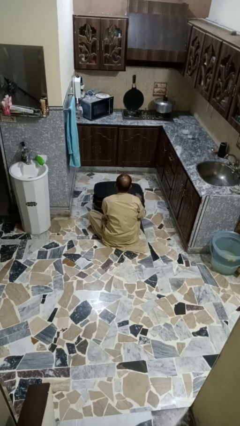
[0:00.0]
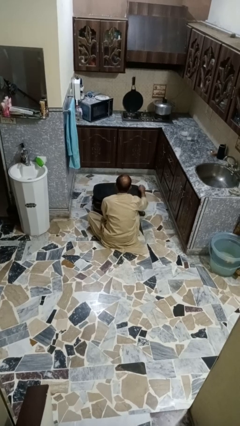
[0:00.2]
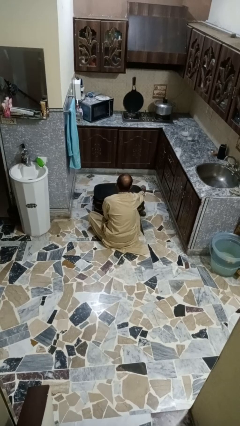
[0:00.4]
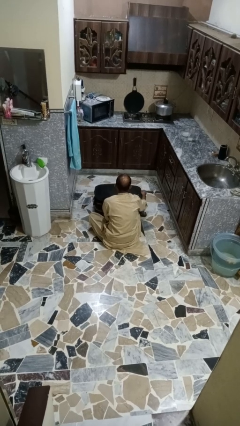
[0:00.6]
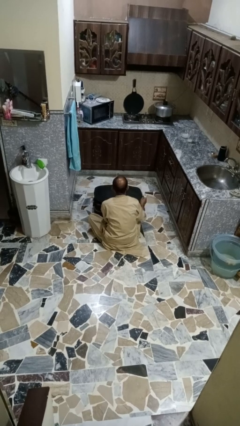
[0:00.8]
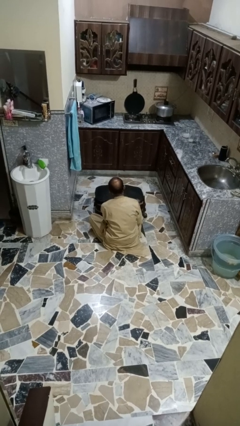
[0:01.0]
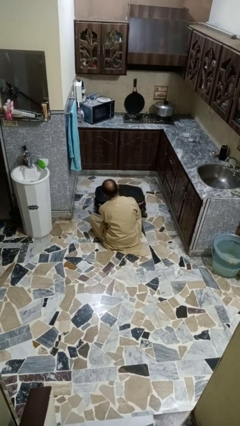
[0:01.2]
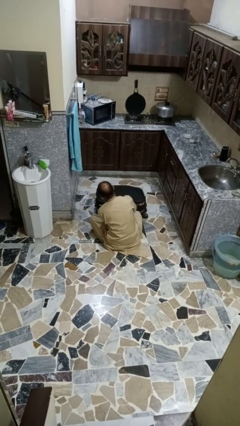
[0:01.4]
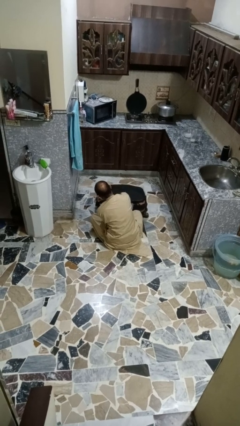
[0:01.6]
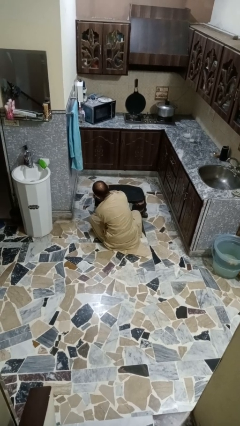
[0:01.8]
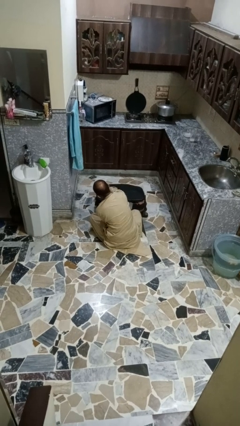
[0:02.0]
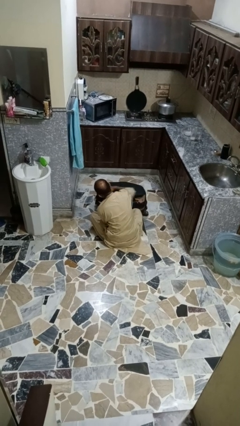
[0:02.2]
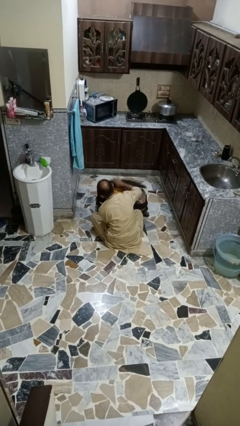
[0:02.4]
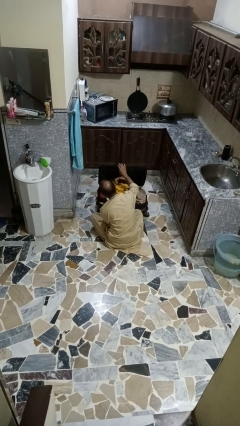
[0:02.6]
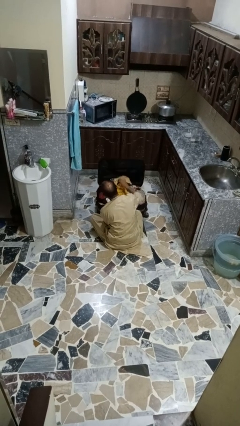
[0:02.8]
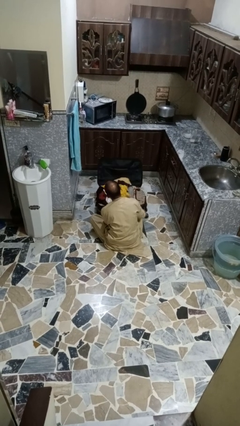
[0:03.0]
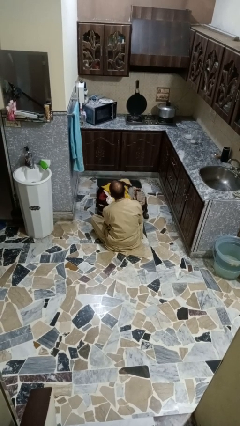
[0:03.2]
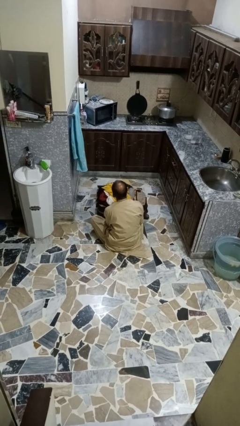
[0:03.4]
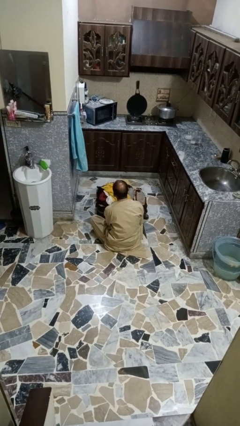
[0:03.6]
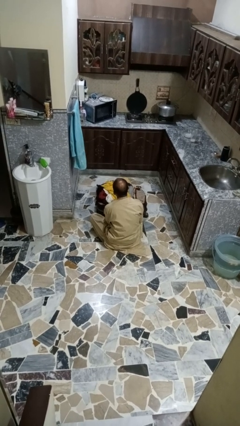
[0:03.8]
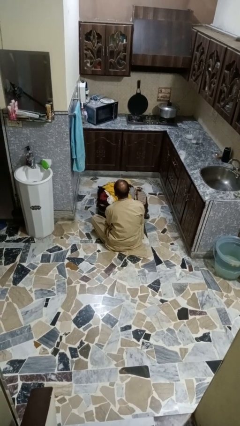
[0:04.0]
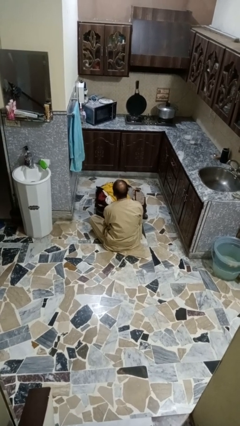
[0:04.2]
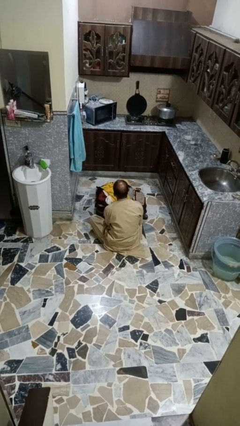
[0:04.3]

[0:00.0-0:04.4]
person opens suitcase

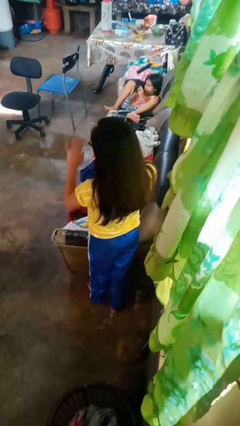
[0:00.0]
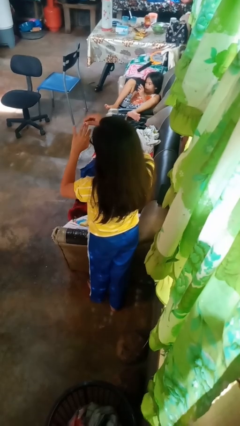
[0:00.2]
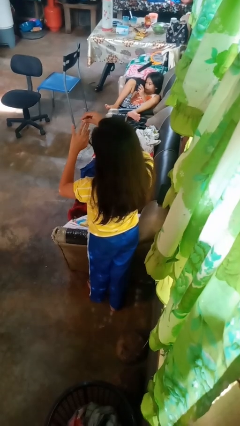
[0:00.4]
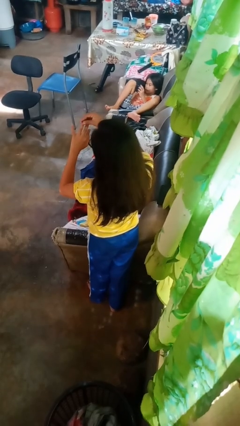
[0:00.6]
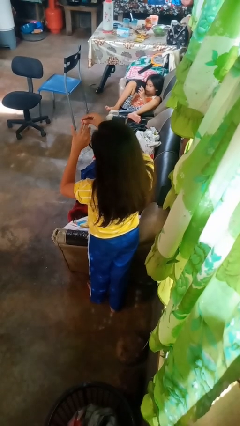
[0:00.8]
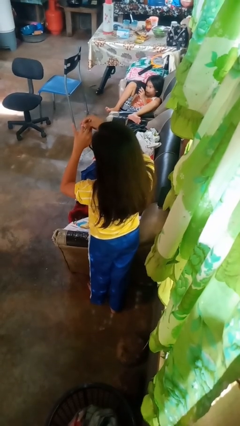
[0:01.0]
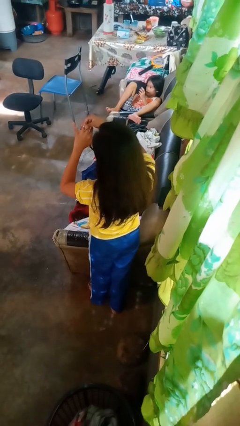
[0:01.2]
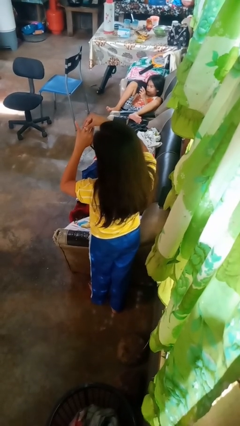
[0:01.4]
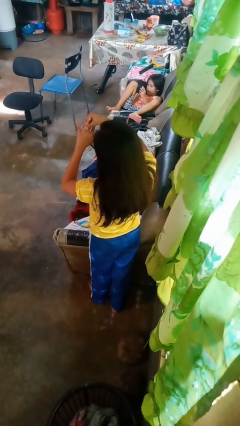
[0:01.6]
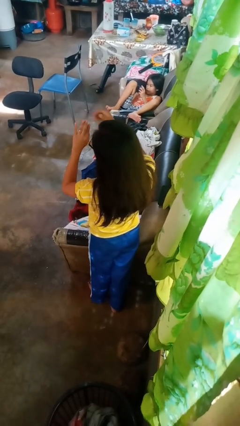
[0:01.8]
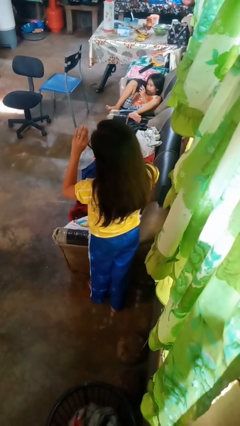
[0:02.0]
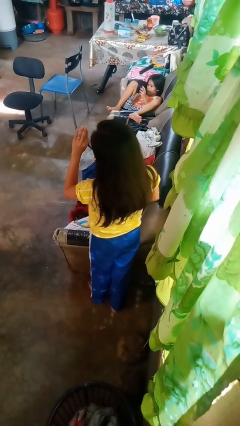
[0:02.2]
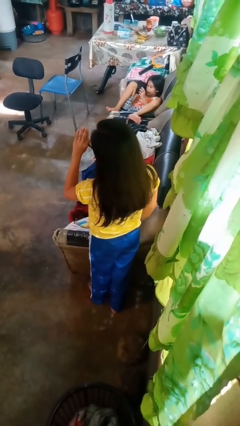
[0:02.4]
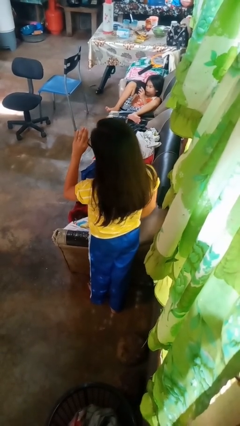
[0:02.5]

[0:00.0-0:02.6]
person puts on ring

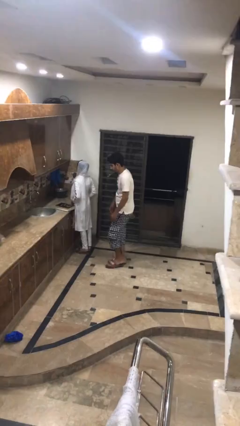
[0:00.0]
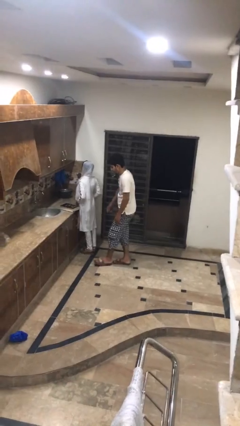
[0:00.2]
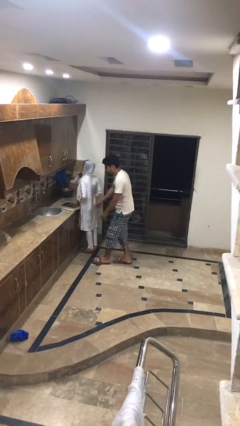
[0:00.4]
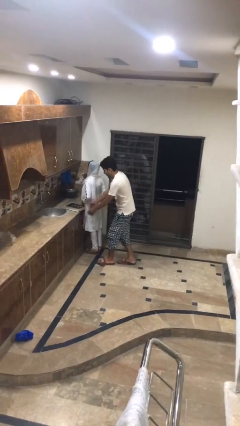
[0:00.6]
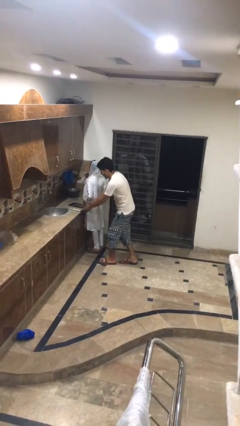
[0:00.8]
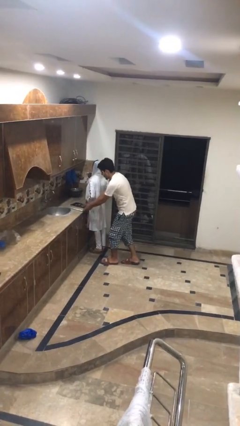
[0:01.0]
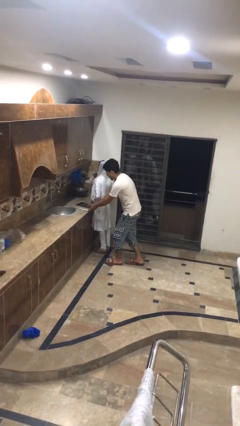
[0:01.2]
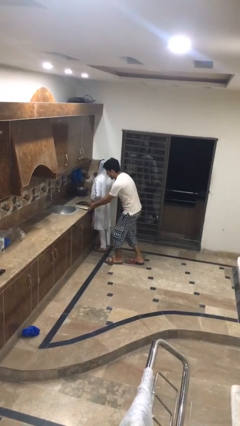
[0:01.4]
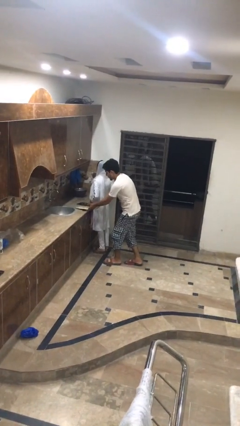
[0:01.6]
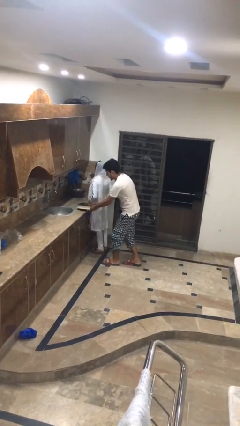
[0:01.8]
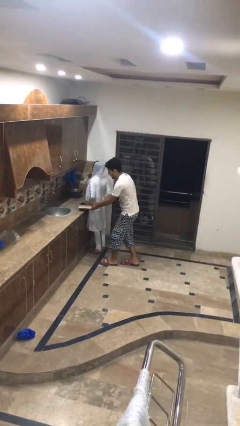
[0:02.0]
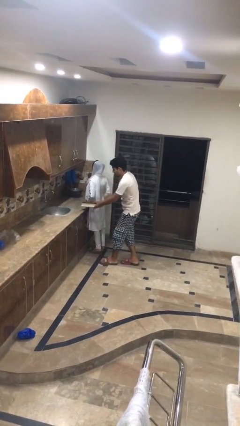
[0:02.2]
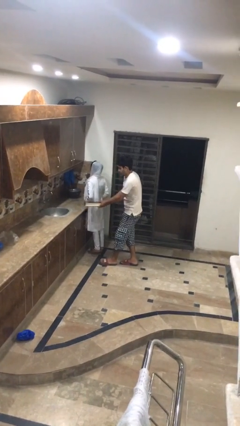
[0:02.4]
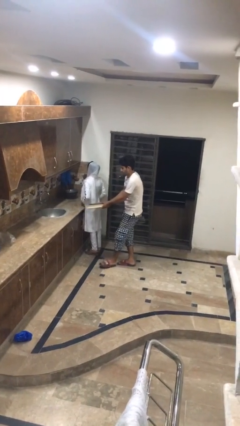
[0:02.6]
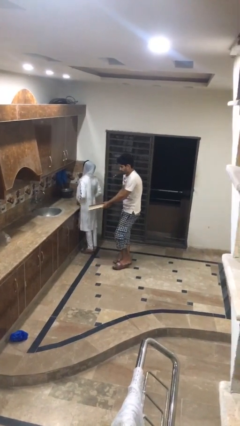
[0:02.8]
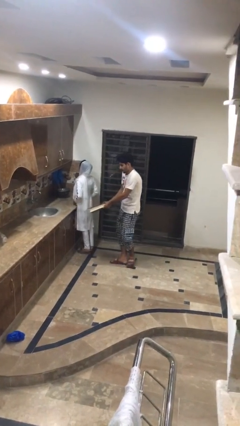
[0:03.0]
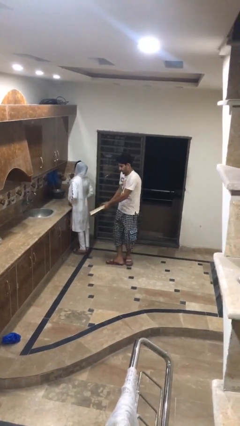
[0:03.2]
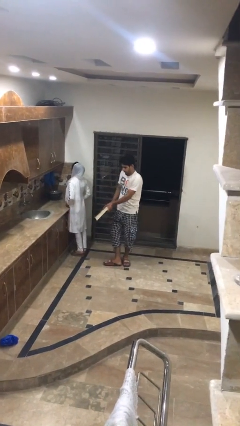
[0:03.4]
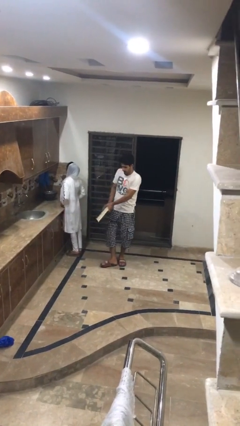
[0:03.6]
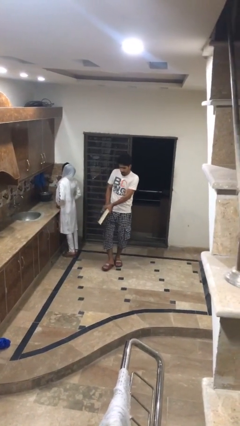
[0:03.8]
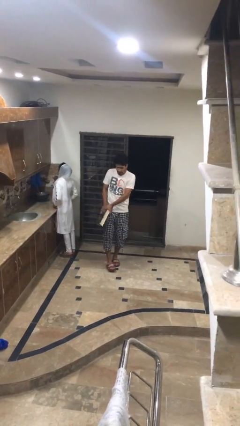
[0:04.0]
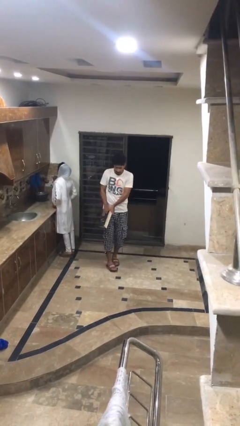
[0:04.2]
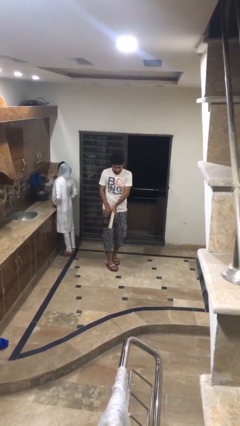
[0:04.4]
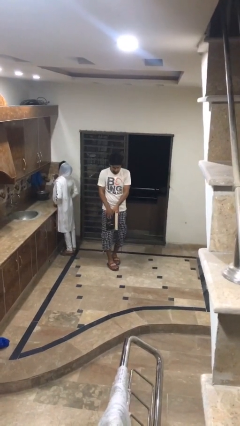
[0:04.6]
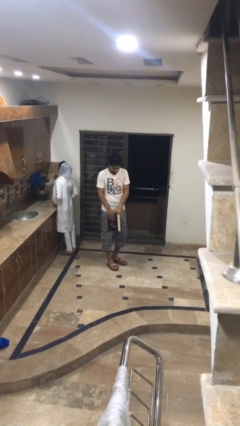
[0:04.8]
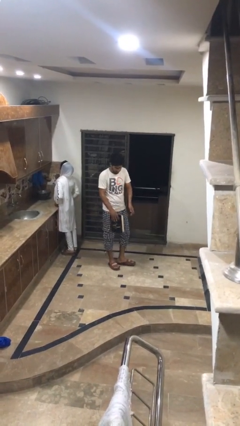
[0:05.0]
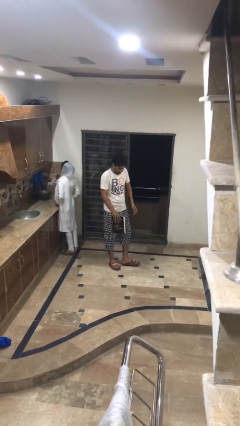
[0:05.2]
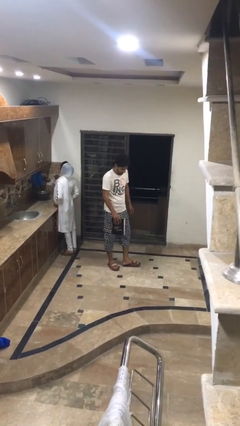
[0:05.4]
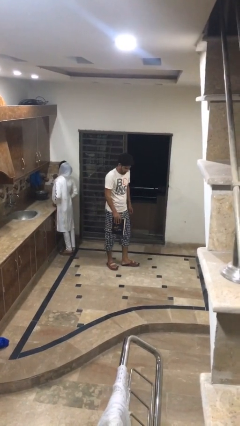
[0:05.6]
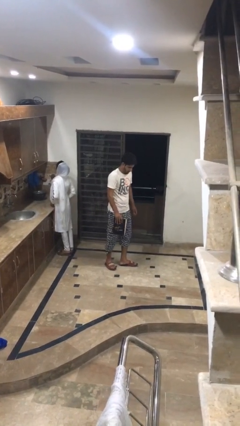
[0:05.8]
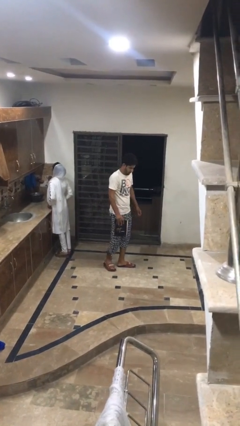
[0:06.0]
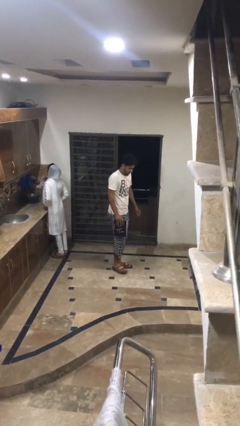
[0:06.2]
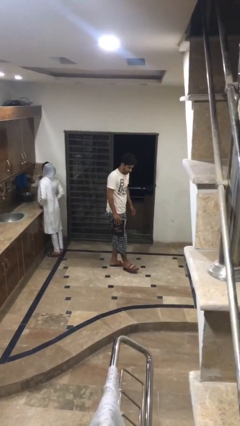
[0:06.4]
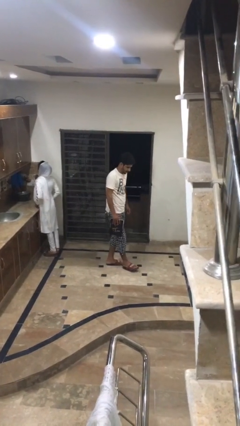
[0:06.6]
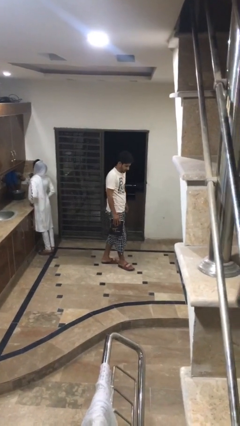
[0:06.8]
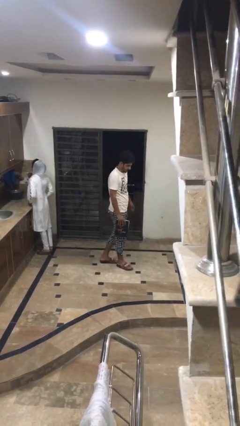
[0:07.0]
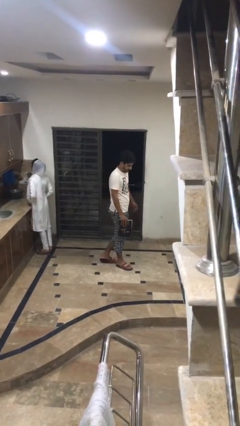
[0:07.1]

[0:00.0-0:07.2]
person steals object from person

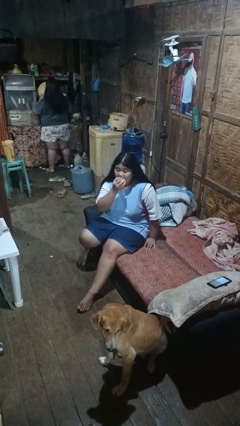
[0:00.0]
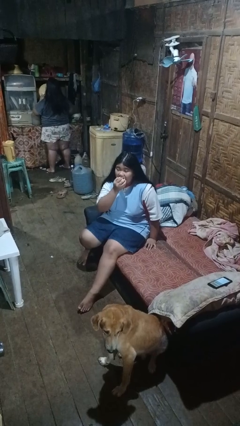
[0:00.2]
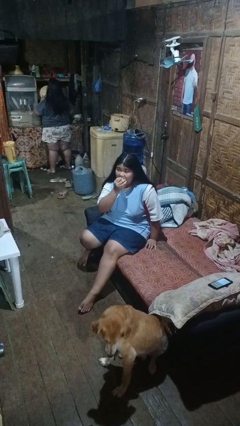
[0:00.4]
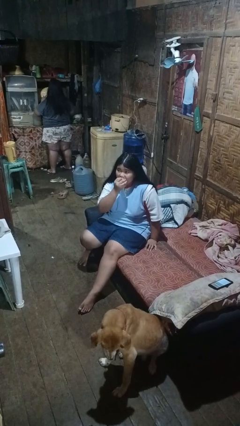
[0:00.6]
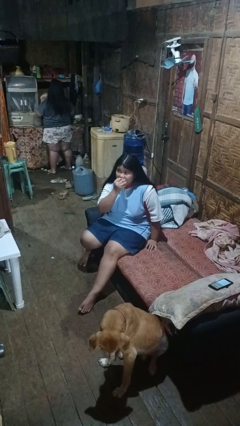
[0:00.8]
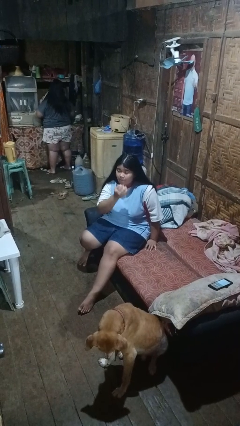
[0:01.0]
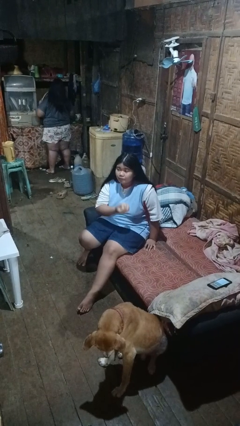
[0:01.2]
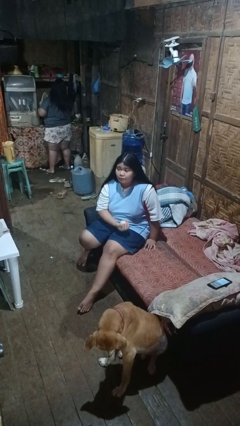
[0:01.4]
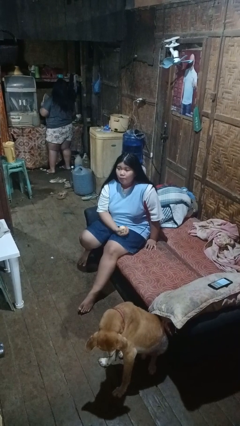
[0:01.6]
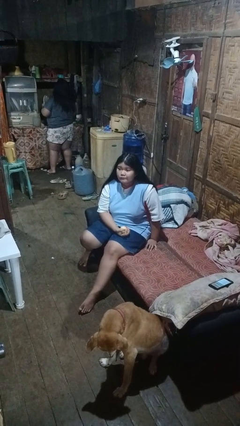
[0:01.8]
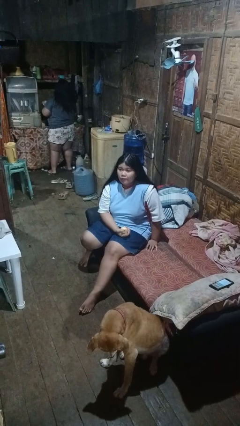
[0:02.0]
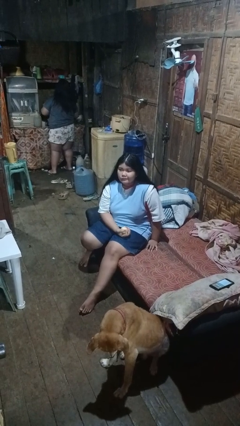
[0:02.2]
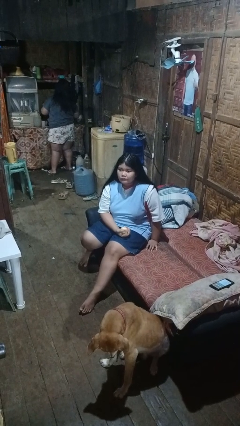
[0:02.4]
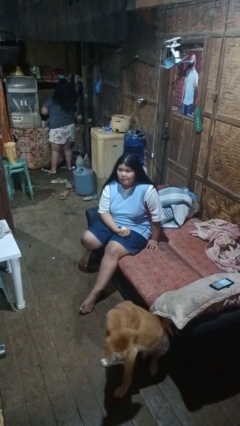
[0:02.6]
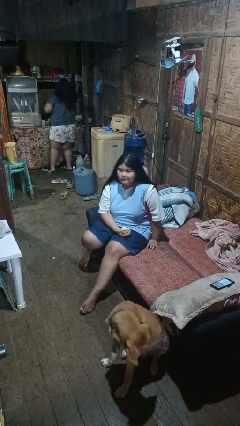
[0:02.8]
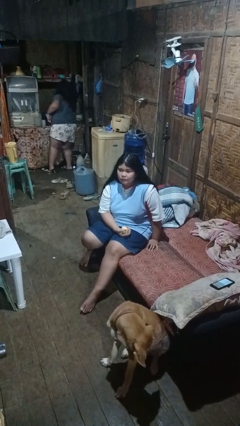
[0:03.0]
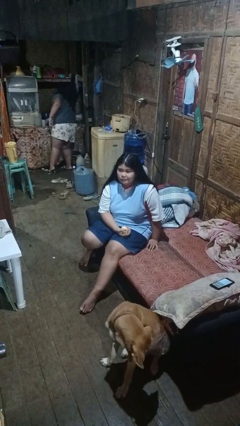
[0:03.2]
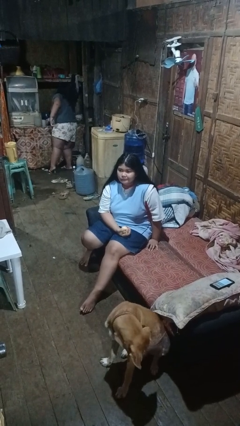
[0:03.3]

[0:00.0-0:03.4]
person eats apple
